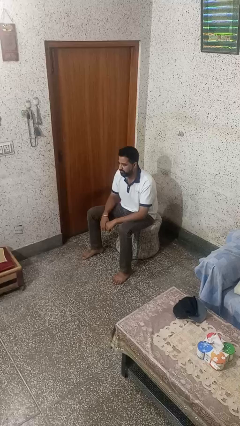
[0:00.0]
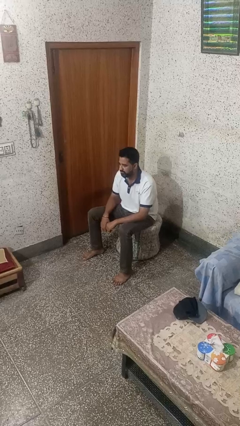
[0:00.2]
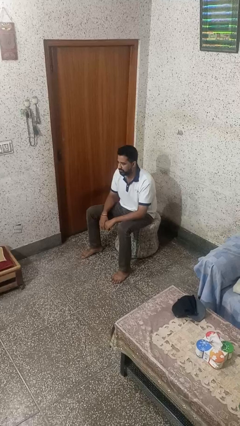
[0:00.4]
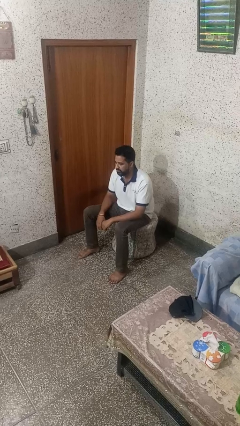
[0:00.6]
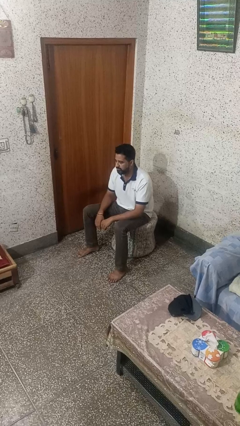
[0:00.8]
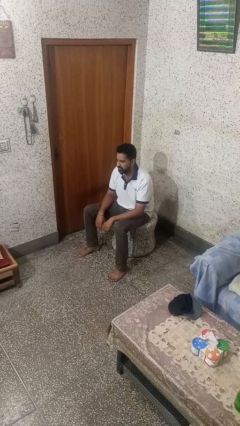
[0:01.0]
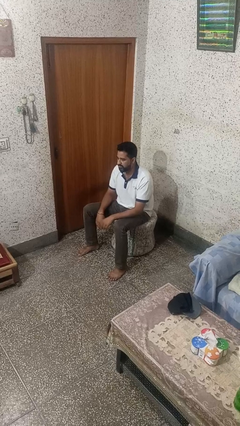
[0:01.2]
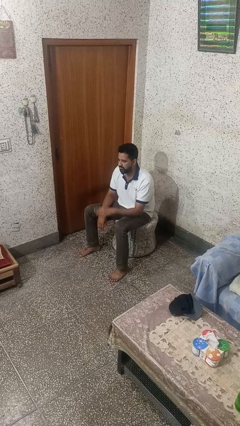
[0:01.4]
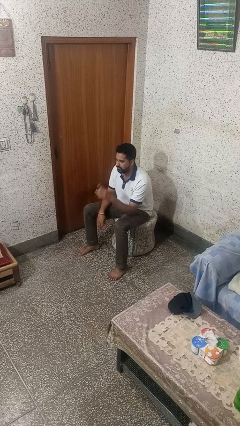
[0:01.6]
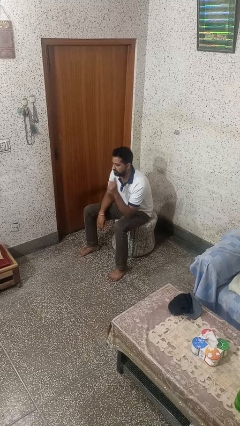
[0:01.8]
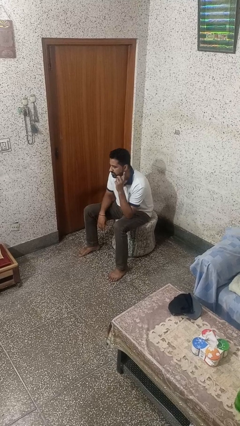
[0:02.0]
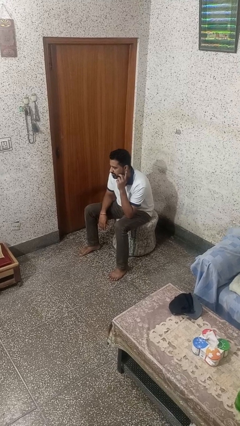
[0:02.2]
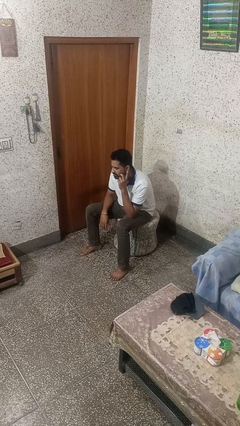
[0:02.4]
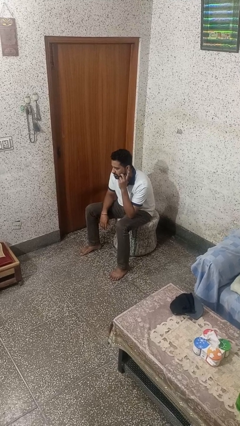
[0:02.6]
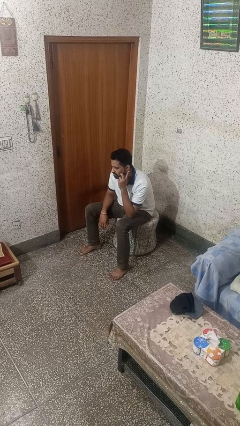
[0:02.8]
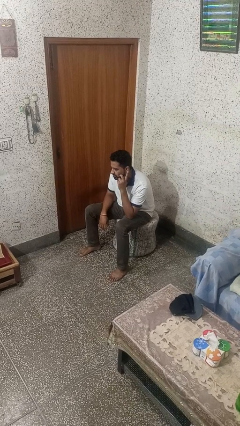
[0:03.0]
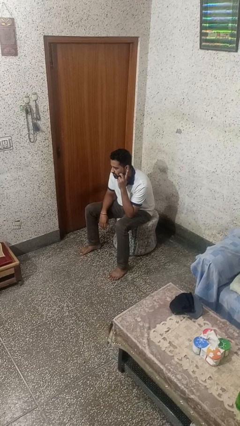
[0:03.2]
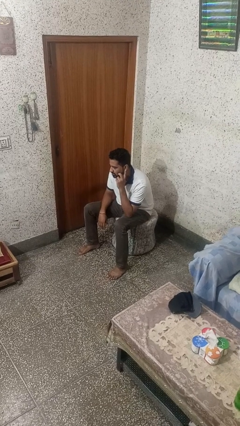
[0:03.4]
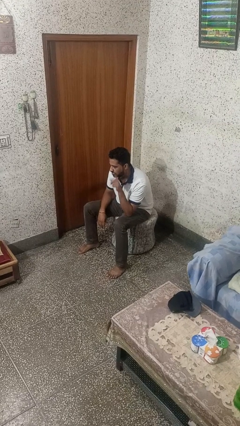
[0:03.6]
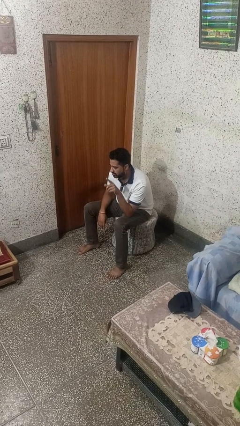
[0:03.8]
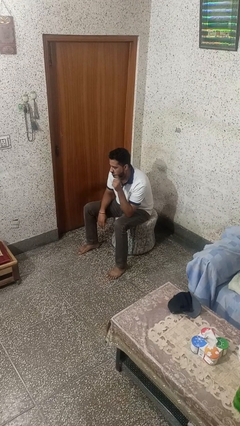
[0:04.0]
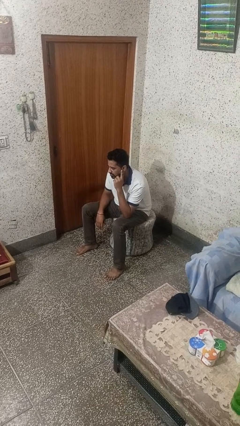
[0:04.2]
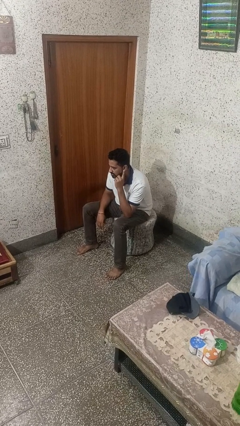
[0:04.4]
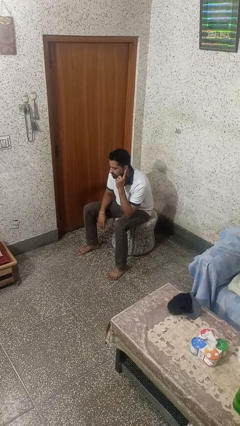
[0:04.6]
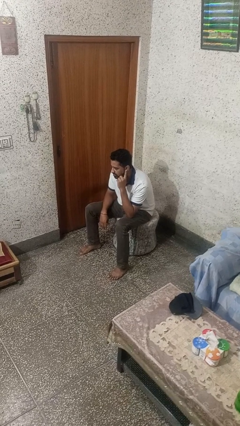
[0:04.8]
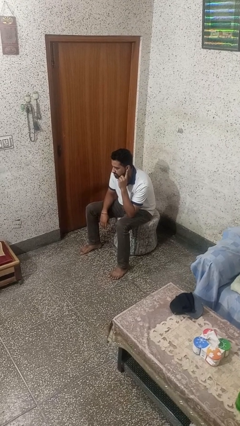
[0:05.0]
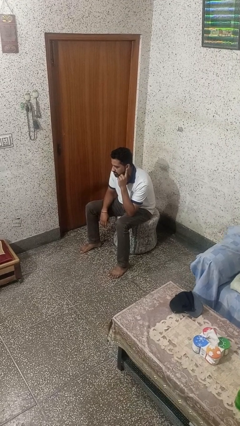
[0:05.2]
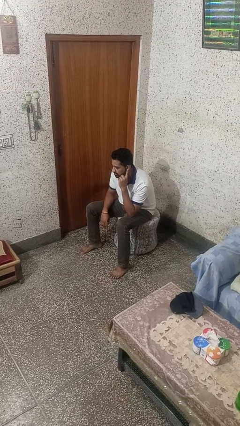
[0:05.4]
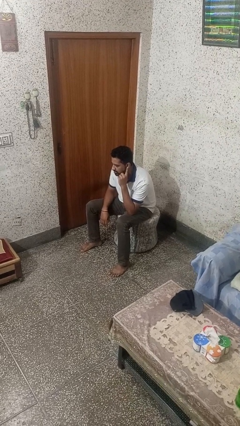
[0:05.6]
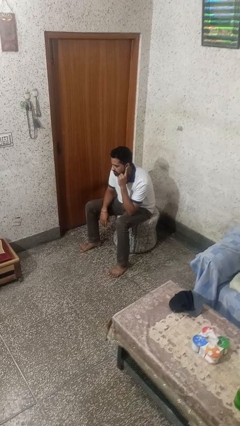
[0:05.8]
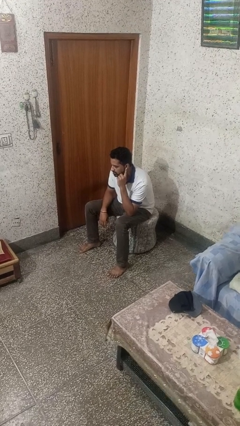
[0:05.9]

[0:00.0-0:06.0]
person gestures listen closely

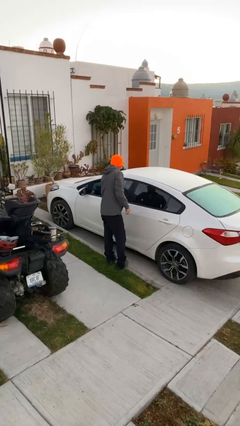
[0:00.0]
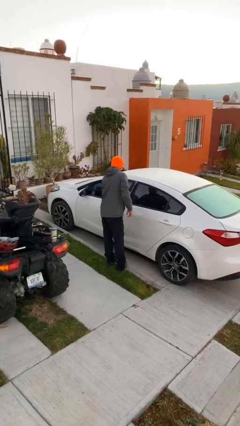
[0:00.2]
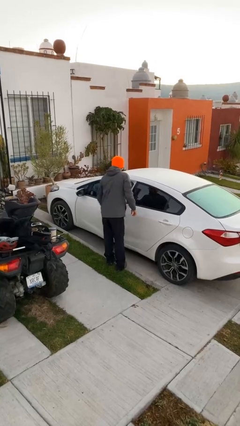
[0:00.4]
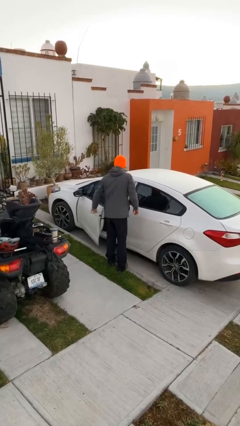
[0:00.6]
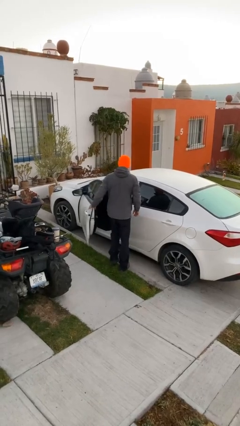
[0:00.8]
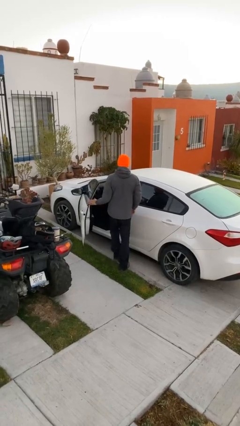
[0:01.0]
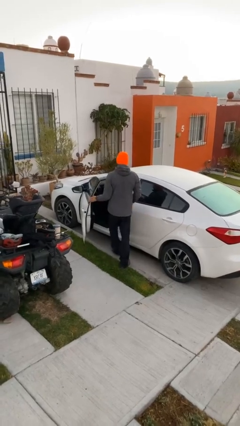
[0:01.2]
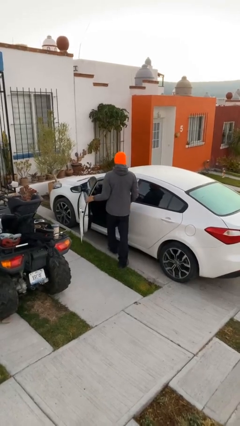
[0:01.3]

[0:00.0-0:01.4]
person opens car door

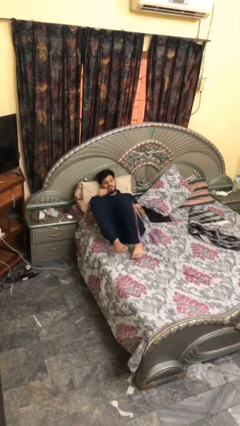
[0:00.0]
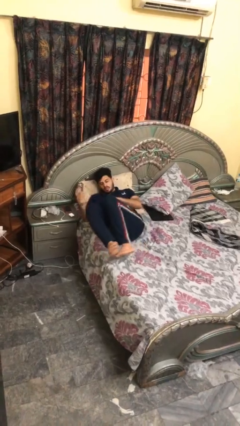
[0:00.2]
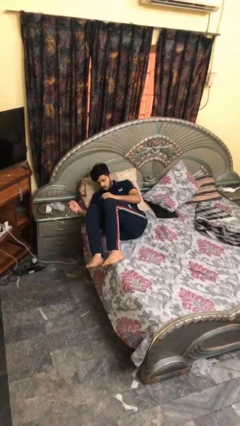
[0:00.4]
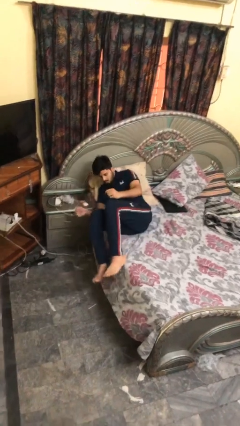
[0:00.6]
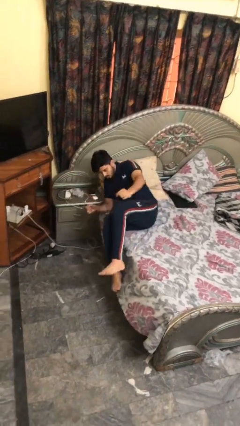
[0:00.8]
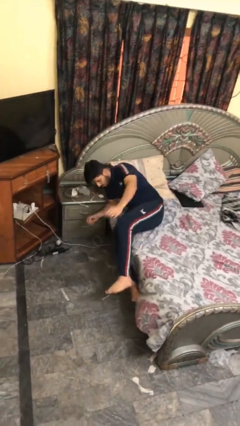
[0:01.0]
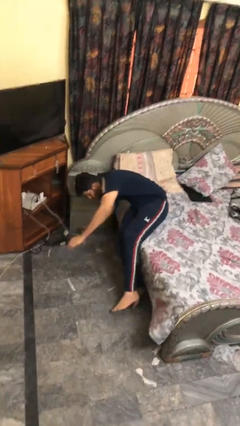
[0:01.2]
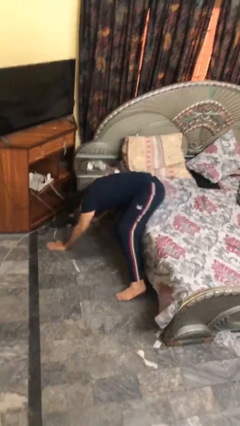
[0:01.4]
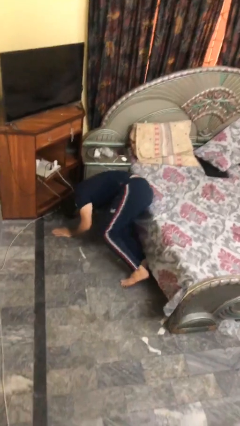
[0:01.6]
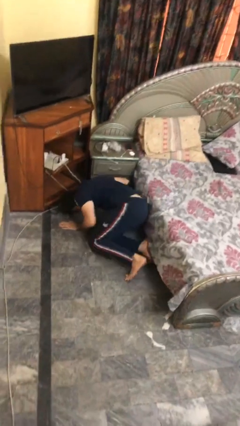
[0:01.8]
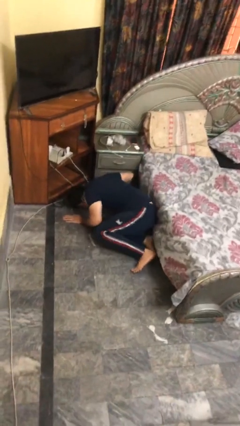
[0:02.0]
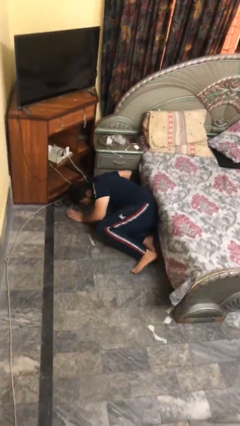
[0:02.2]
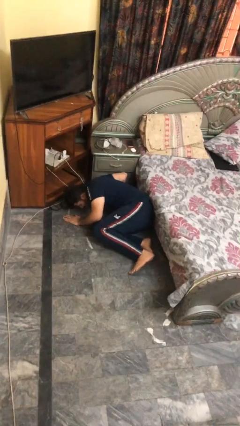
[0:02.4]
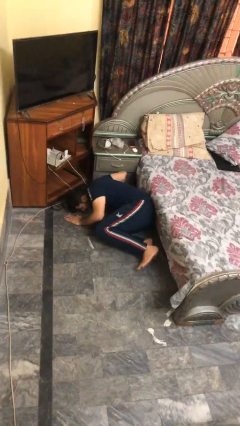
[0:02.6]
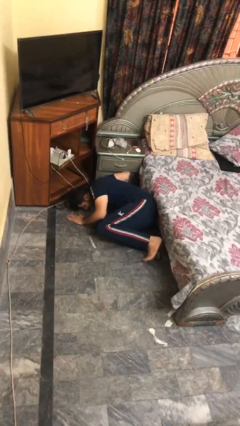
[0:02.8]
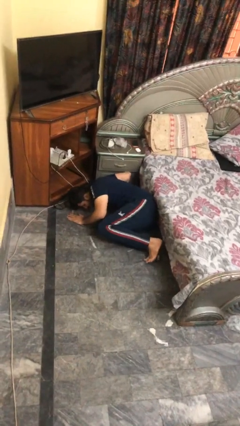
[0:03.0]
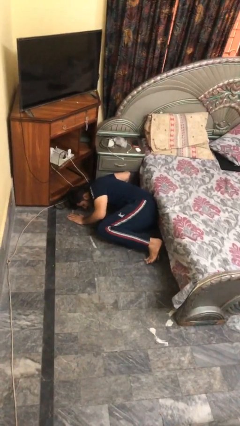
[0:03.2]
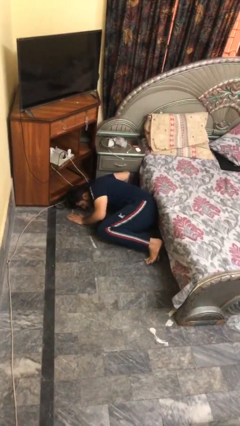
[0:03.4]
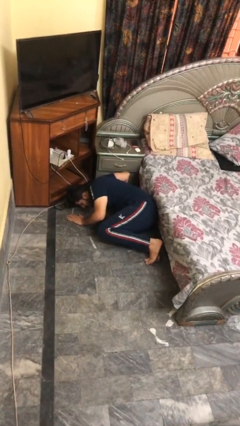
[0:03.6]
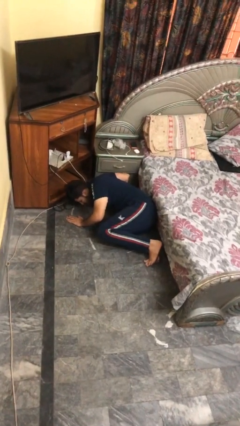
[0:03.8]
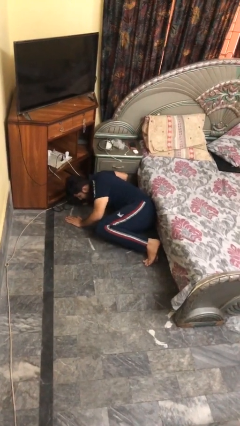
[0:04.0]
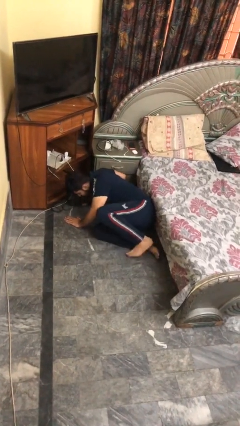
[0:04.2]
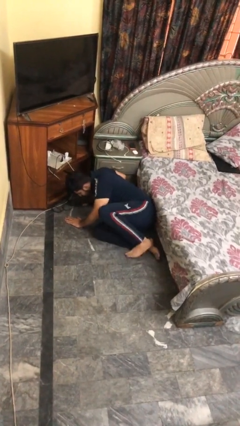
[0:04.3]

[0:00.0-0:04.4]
person falls from bed

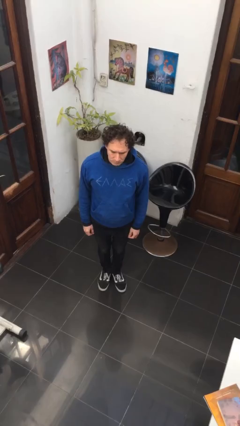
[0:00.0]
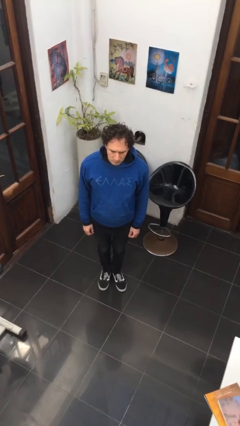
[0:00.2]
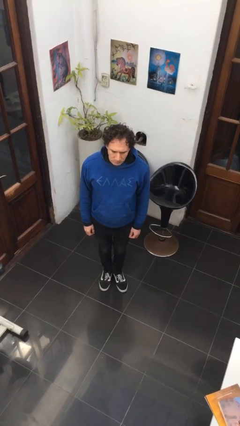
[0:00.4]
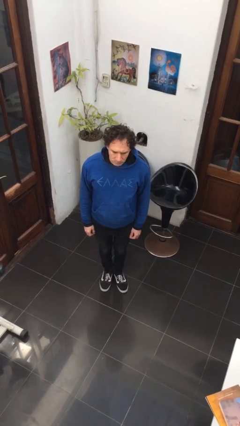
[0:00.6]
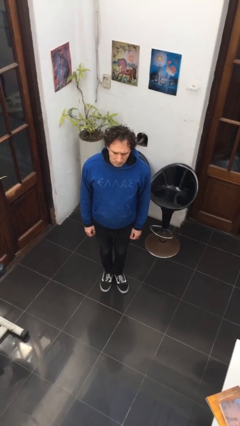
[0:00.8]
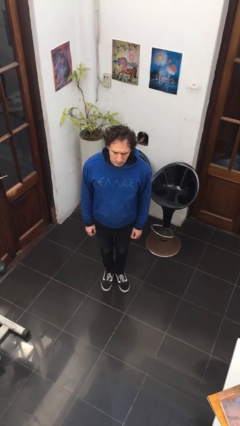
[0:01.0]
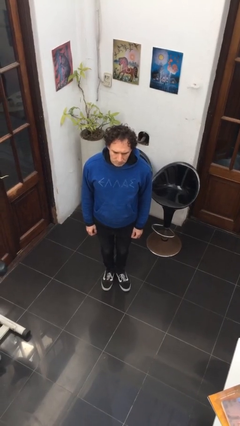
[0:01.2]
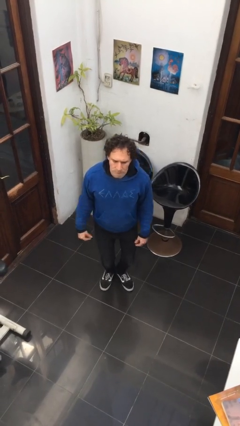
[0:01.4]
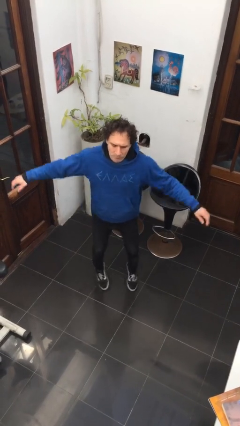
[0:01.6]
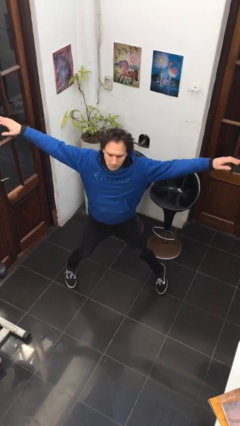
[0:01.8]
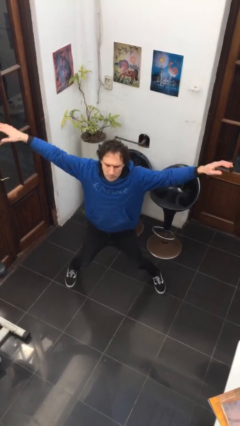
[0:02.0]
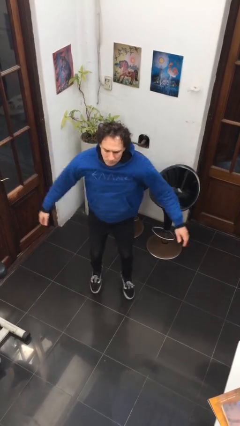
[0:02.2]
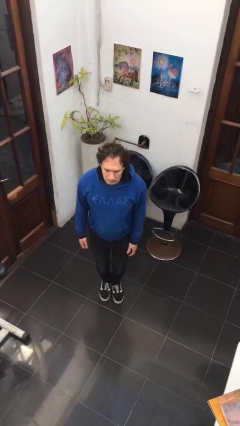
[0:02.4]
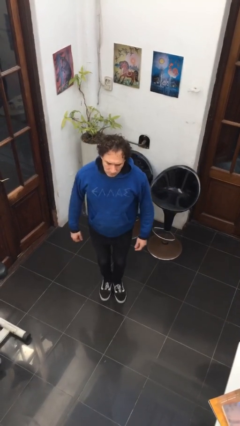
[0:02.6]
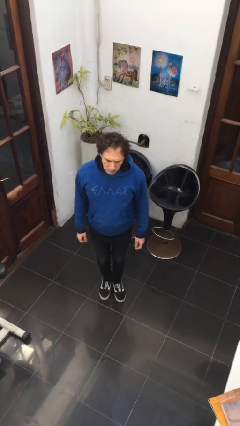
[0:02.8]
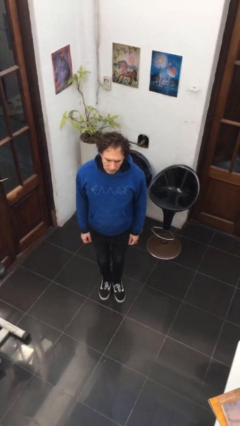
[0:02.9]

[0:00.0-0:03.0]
person exercises with jumping jacks

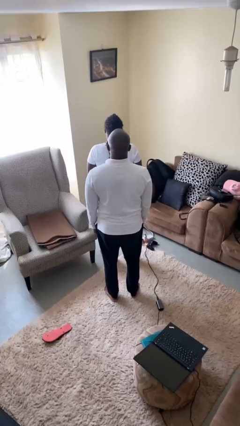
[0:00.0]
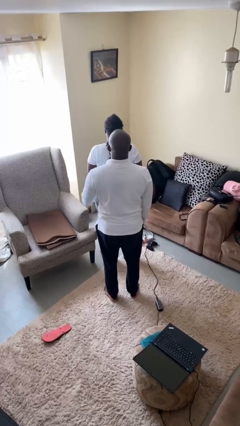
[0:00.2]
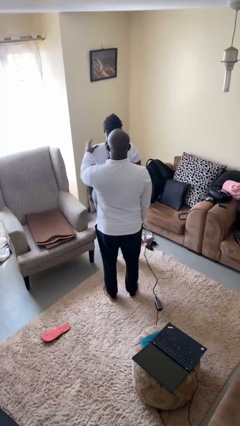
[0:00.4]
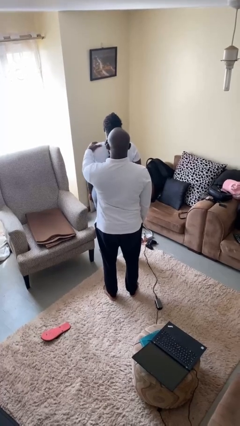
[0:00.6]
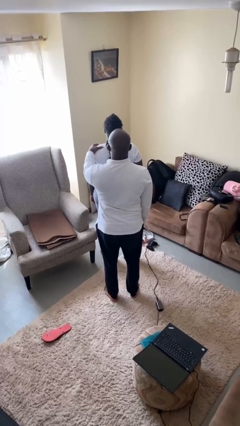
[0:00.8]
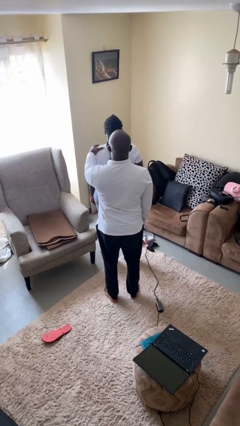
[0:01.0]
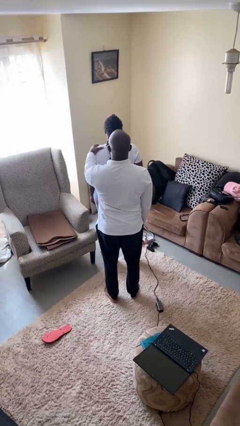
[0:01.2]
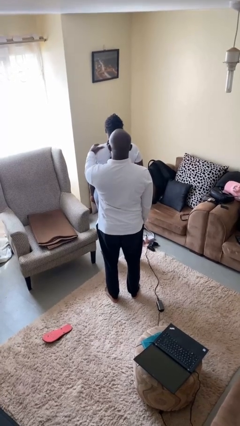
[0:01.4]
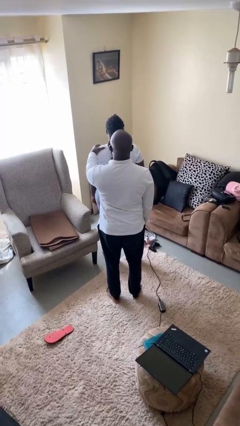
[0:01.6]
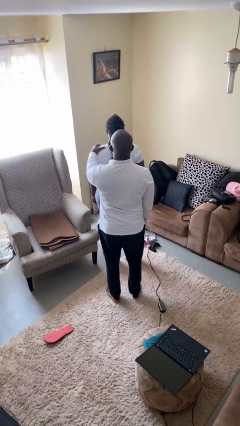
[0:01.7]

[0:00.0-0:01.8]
person grabs person by shoulder

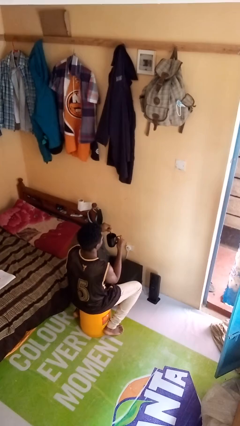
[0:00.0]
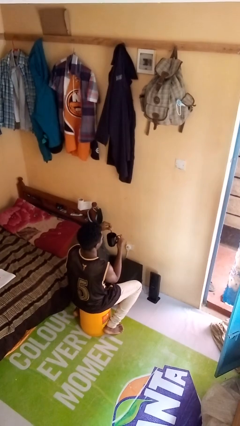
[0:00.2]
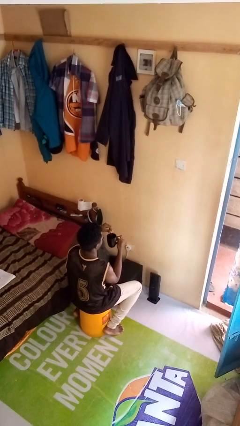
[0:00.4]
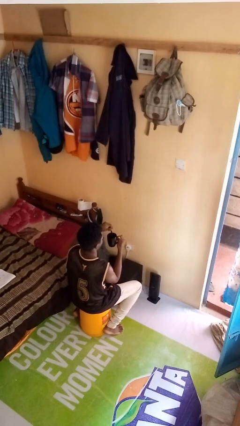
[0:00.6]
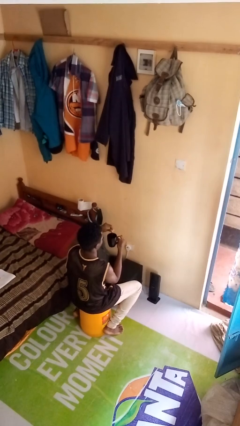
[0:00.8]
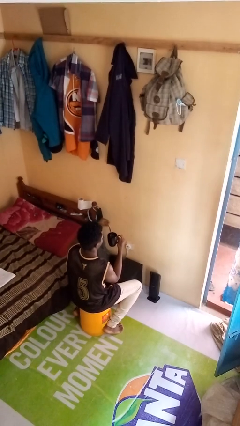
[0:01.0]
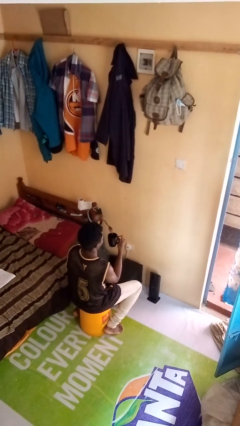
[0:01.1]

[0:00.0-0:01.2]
person stirs mug
